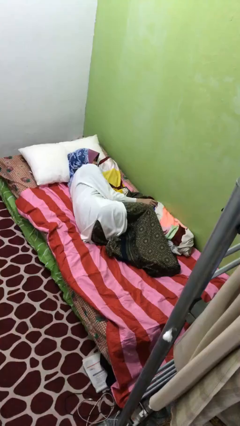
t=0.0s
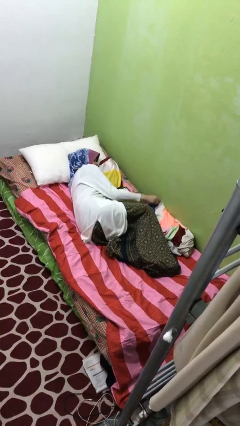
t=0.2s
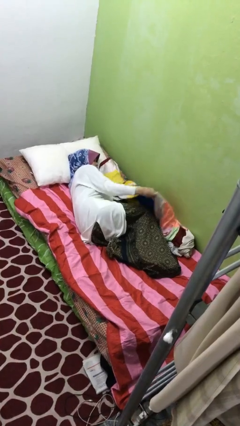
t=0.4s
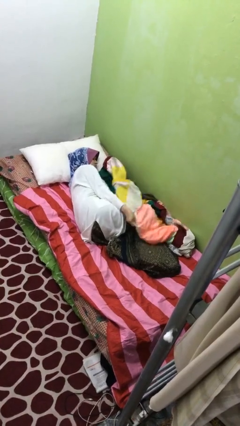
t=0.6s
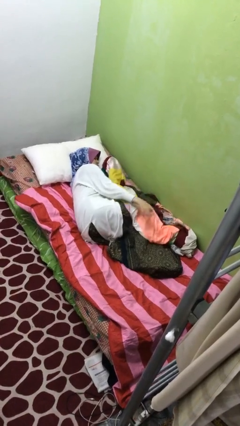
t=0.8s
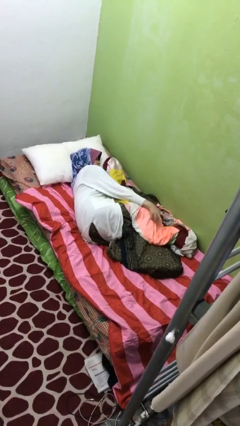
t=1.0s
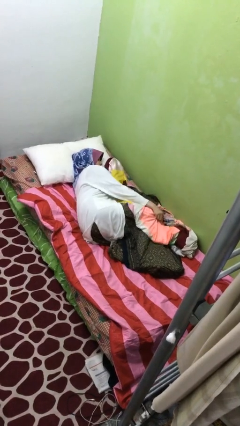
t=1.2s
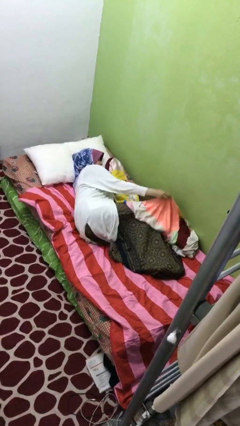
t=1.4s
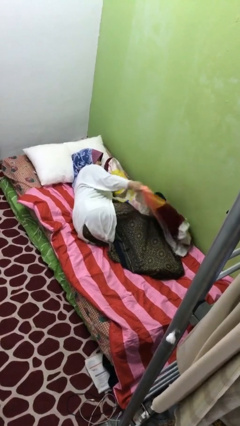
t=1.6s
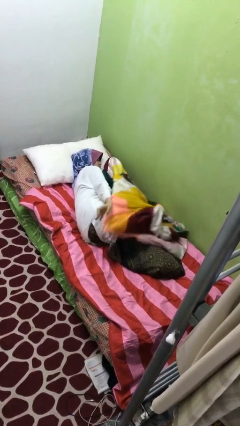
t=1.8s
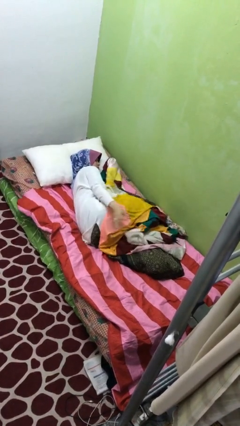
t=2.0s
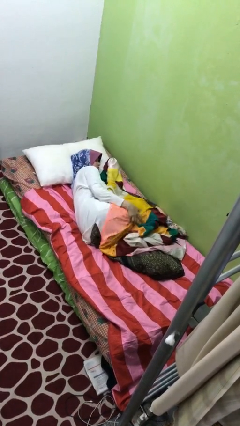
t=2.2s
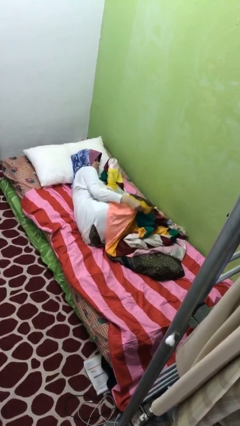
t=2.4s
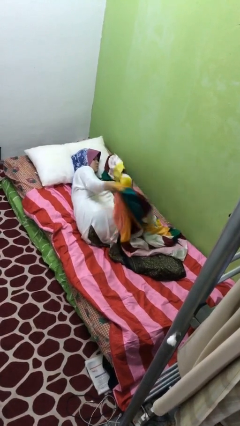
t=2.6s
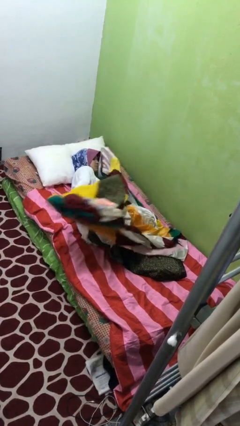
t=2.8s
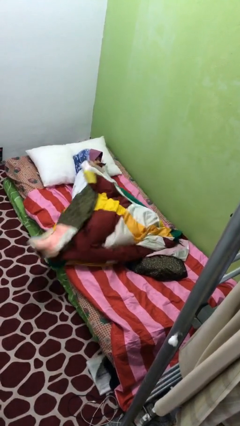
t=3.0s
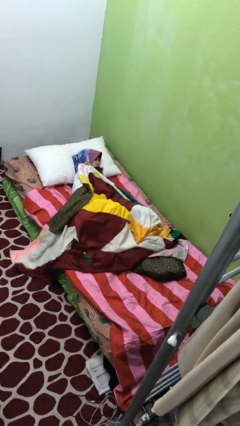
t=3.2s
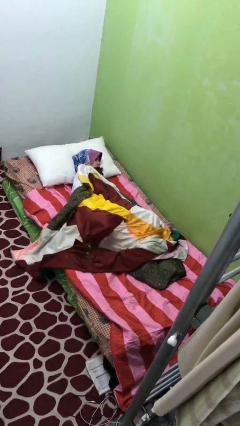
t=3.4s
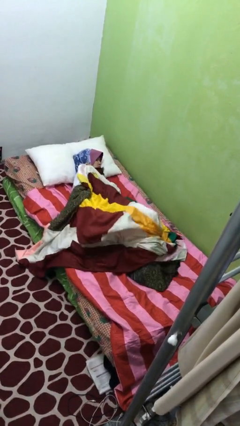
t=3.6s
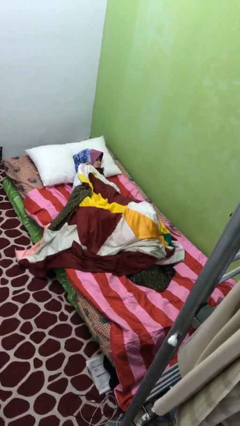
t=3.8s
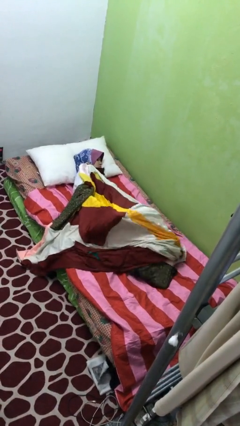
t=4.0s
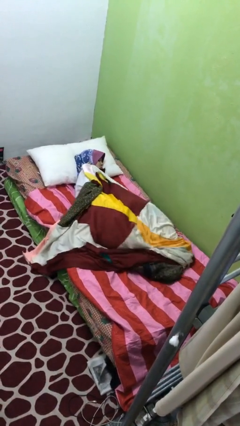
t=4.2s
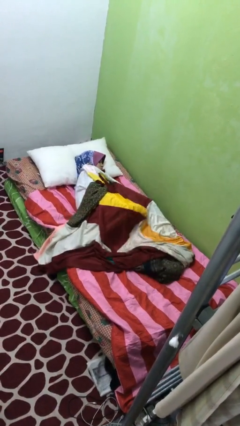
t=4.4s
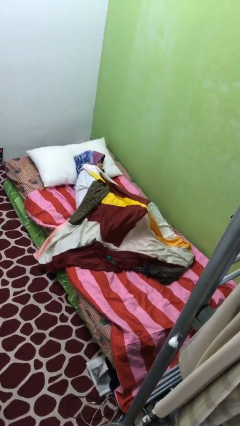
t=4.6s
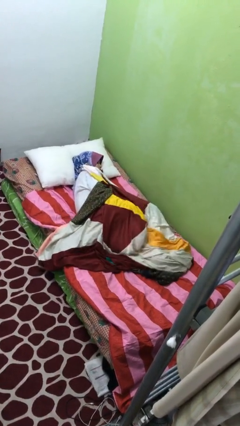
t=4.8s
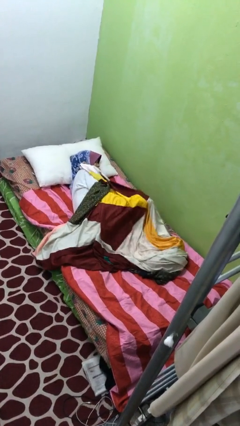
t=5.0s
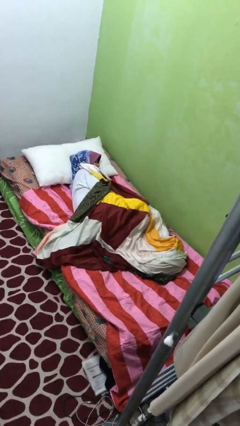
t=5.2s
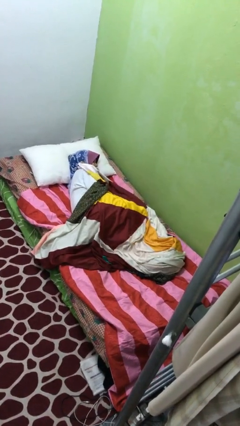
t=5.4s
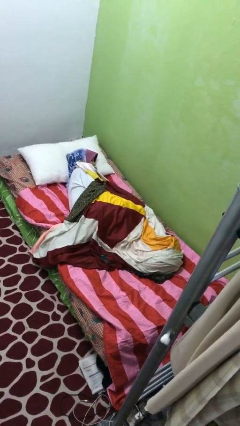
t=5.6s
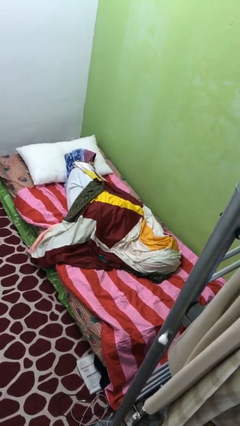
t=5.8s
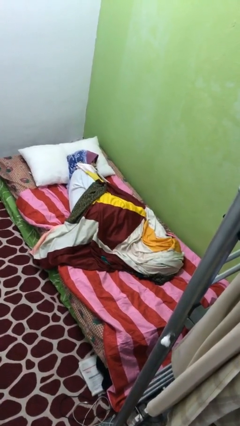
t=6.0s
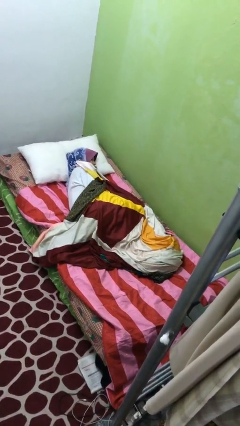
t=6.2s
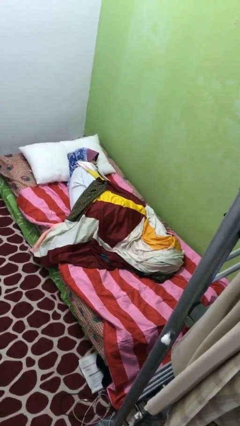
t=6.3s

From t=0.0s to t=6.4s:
person covers with blanket

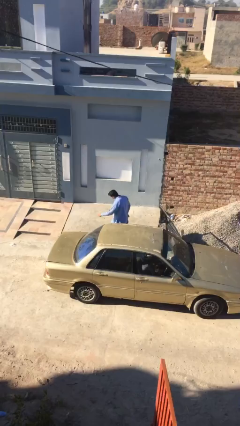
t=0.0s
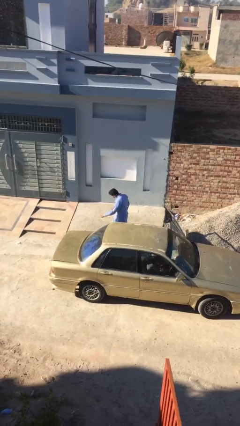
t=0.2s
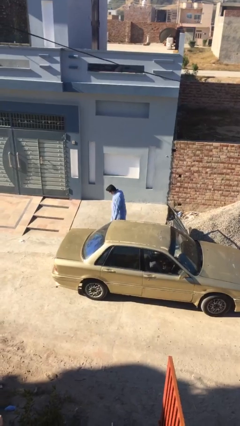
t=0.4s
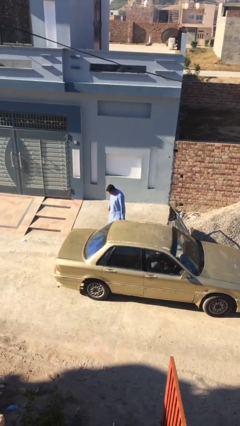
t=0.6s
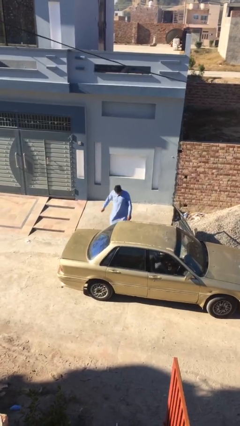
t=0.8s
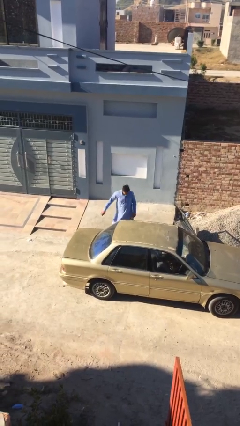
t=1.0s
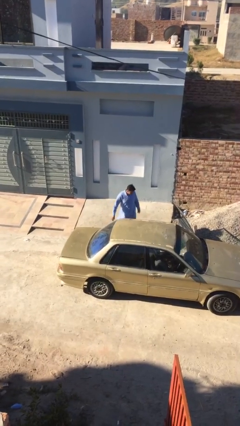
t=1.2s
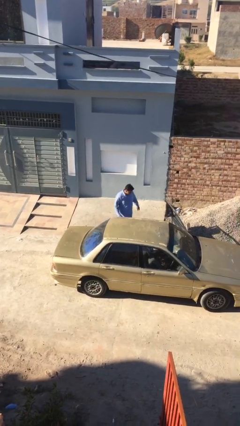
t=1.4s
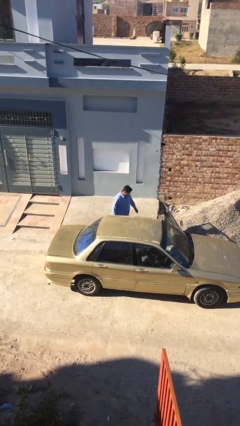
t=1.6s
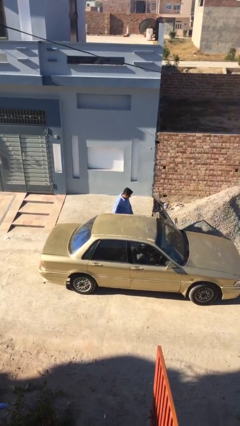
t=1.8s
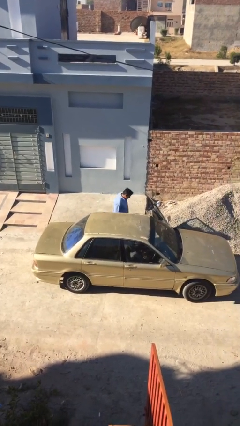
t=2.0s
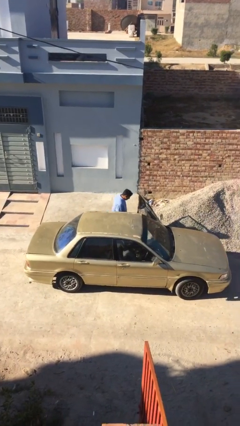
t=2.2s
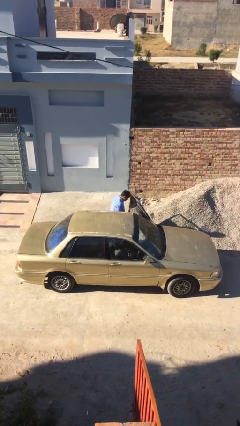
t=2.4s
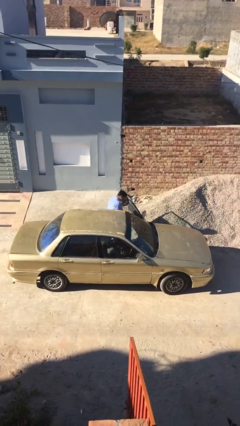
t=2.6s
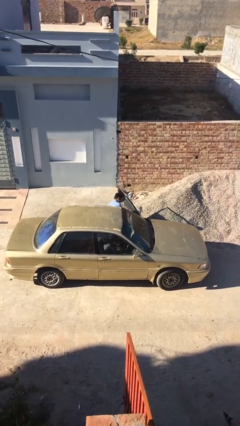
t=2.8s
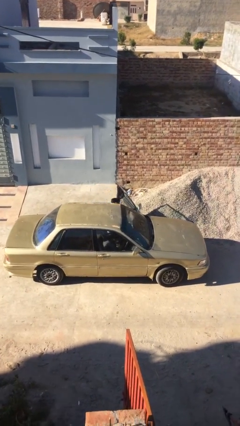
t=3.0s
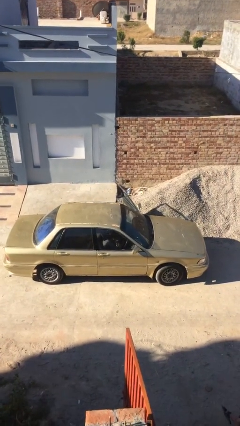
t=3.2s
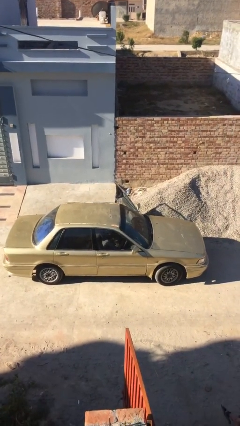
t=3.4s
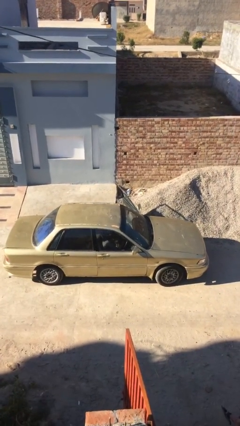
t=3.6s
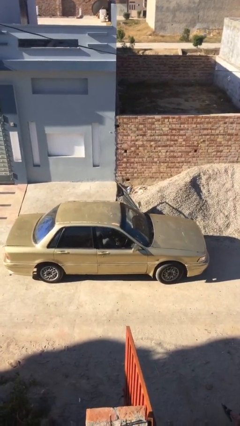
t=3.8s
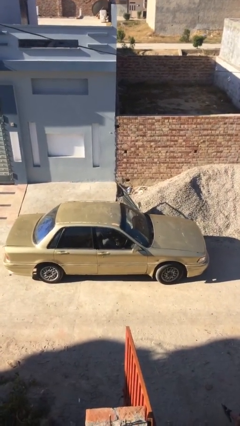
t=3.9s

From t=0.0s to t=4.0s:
person enters car

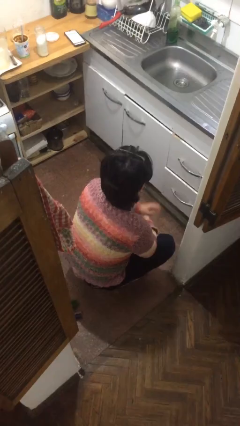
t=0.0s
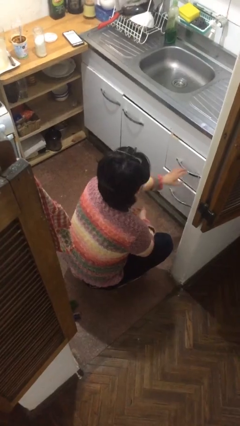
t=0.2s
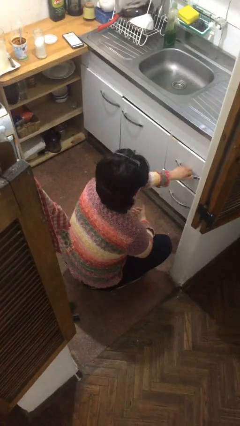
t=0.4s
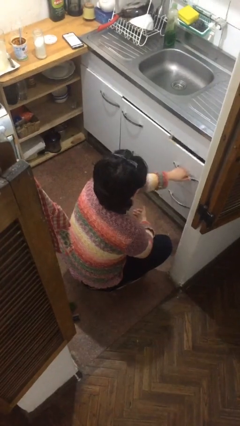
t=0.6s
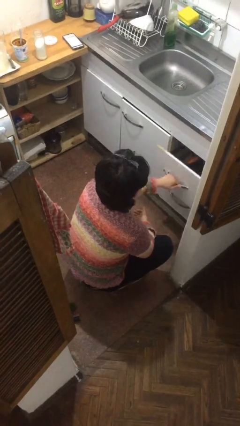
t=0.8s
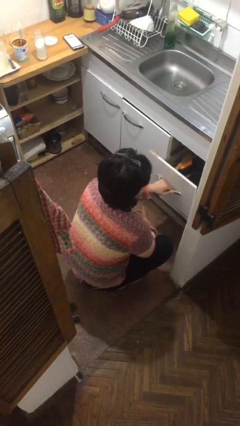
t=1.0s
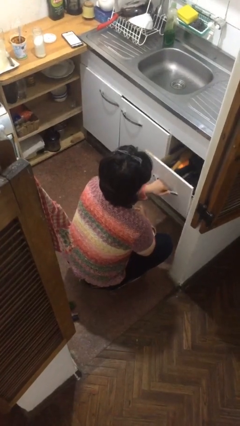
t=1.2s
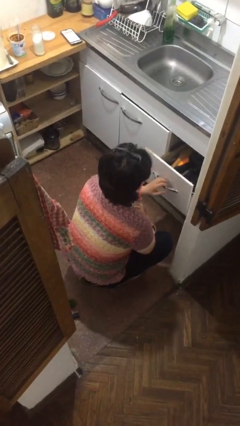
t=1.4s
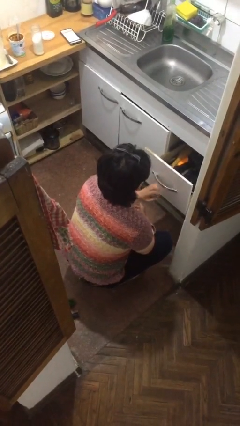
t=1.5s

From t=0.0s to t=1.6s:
person opens kitchen drawer

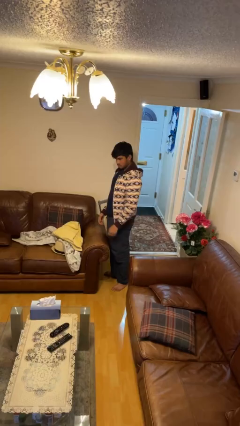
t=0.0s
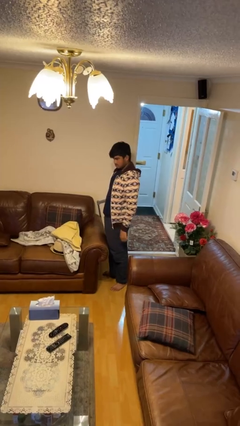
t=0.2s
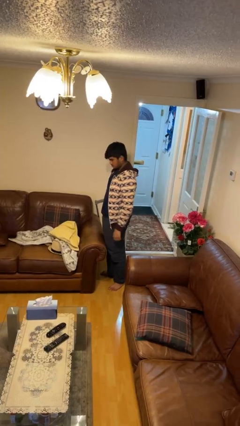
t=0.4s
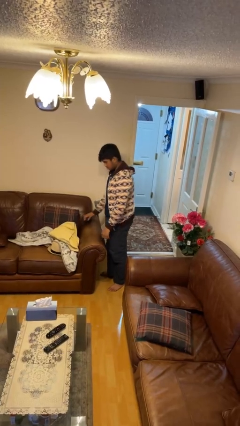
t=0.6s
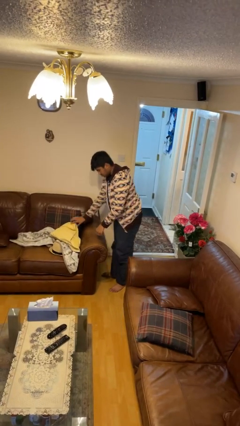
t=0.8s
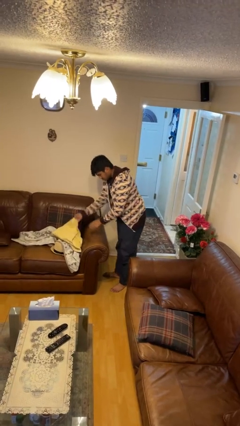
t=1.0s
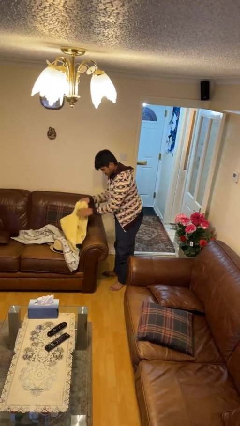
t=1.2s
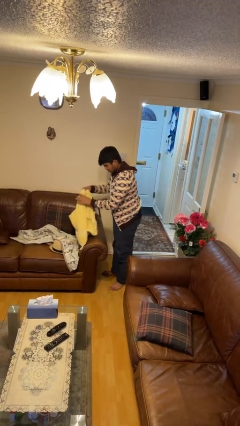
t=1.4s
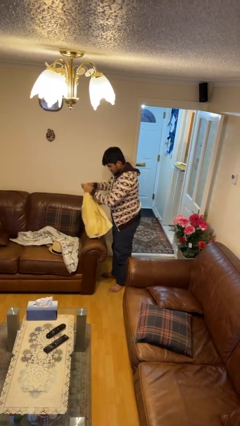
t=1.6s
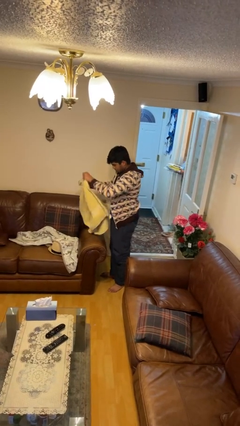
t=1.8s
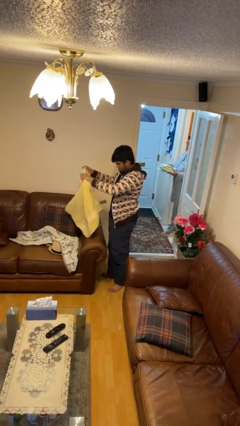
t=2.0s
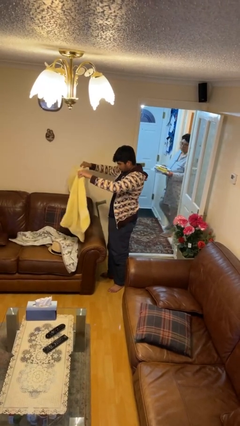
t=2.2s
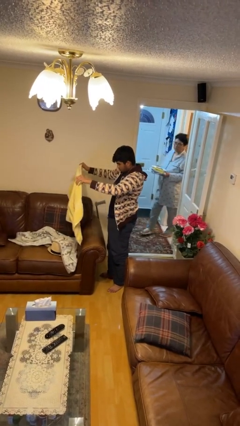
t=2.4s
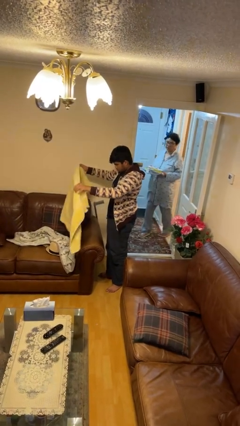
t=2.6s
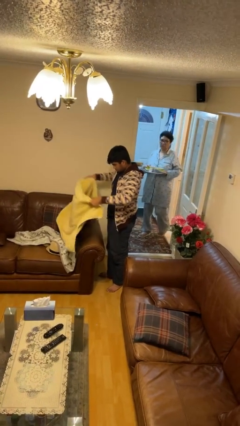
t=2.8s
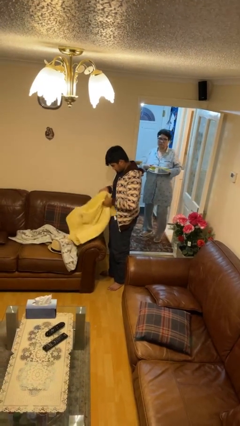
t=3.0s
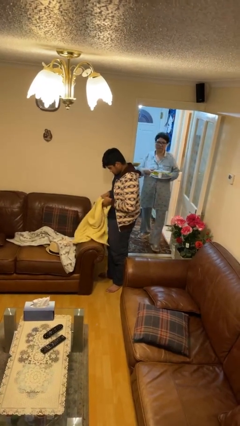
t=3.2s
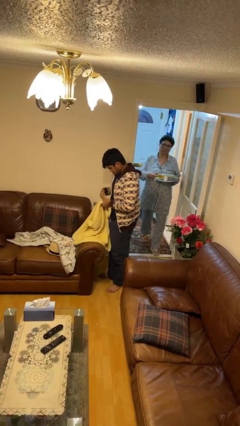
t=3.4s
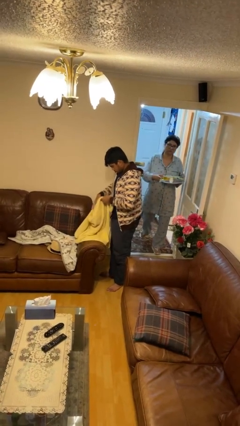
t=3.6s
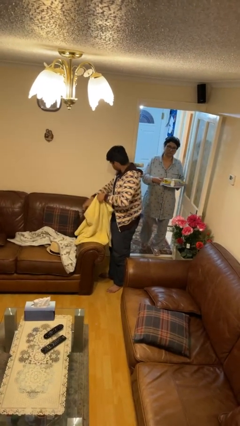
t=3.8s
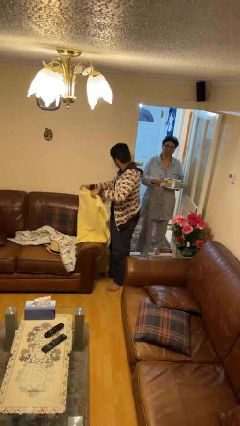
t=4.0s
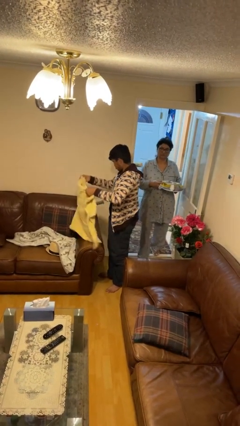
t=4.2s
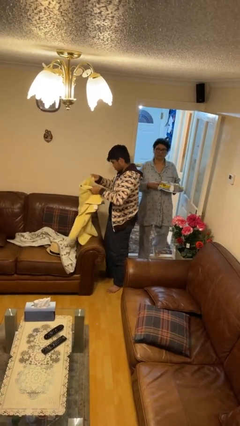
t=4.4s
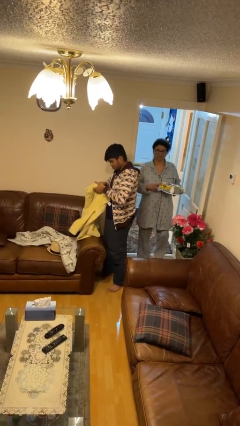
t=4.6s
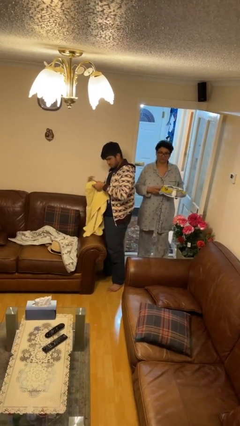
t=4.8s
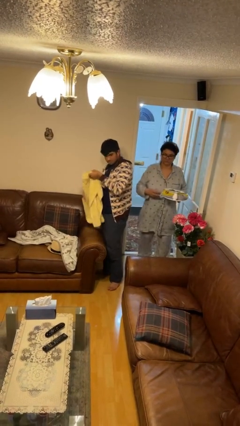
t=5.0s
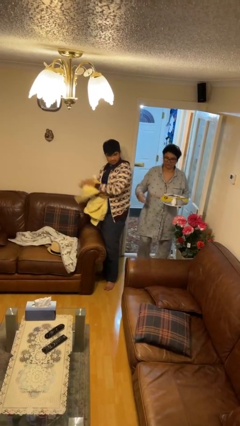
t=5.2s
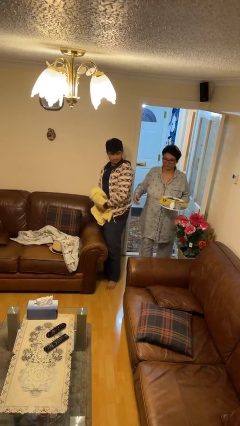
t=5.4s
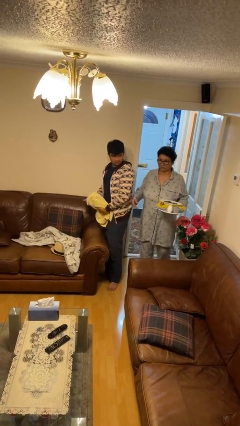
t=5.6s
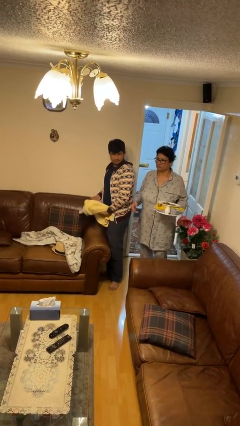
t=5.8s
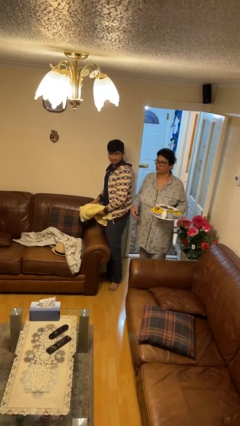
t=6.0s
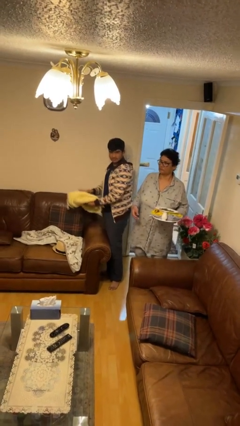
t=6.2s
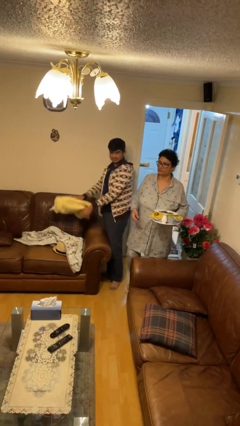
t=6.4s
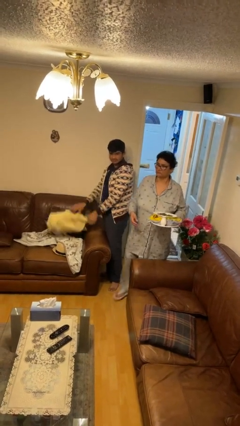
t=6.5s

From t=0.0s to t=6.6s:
person folds towel
